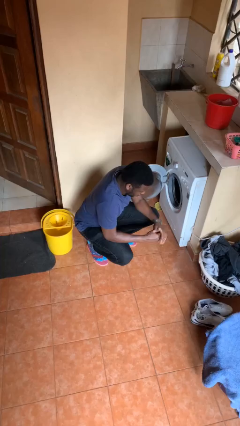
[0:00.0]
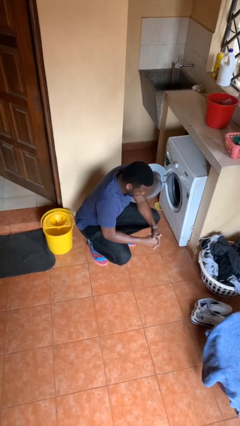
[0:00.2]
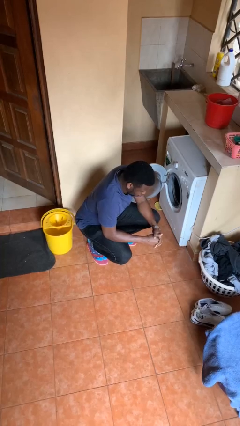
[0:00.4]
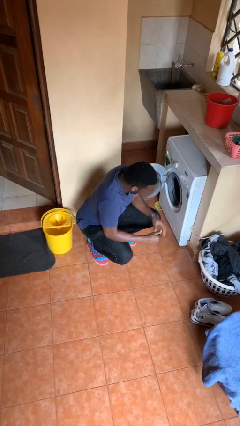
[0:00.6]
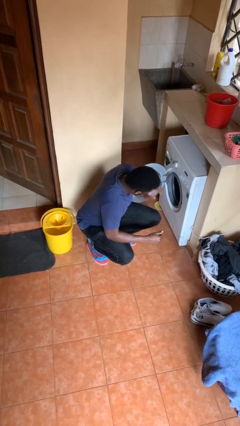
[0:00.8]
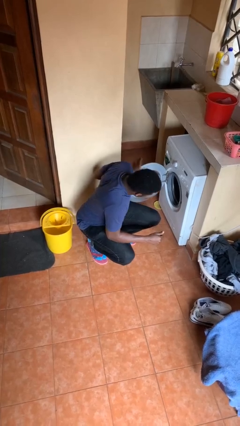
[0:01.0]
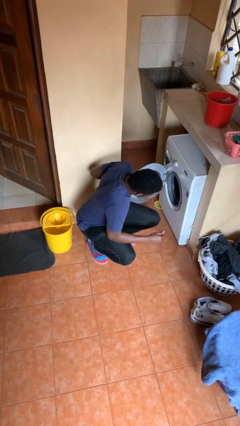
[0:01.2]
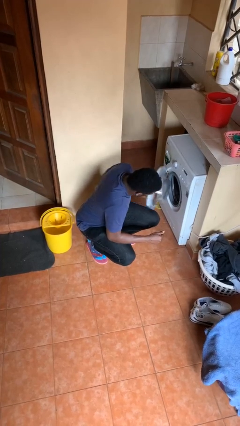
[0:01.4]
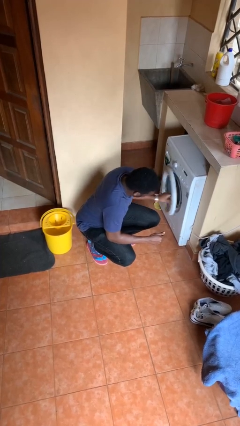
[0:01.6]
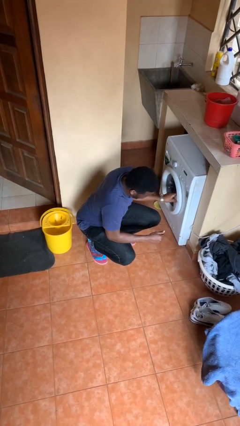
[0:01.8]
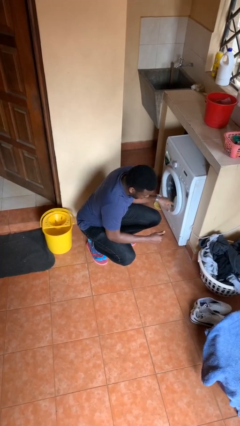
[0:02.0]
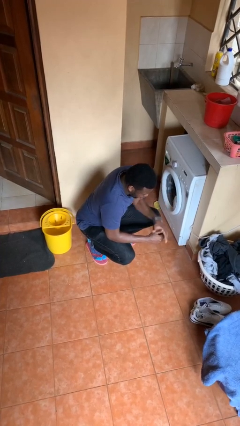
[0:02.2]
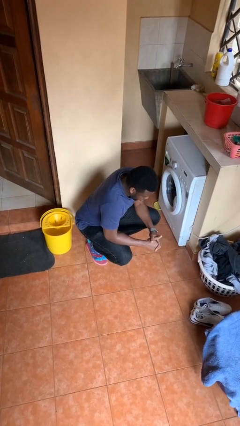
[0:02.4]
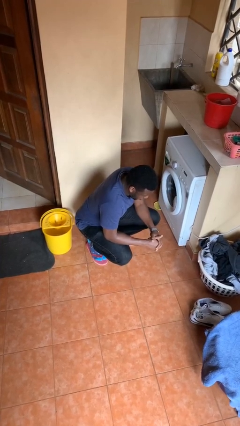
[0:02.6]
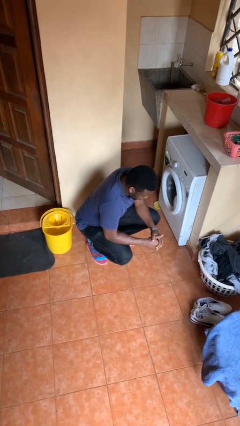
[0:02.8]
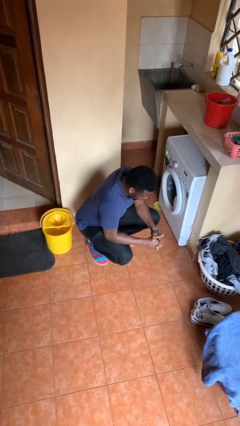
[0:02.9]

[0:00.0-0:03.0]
person closes clothes washer

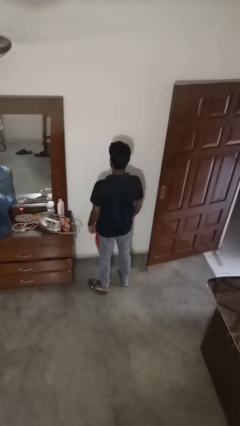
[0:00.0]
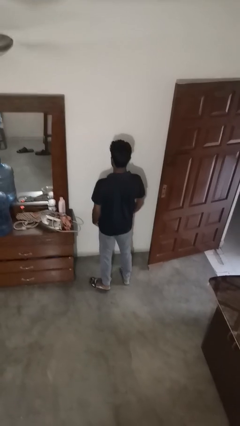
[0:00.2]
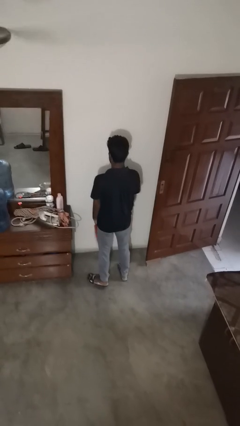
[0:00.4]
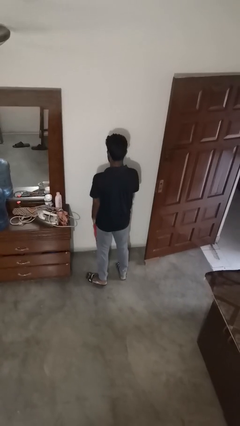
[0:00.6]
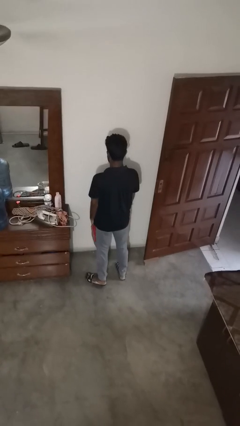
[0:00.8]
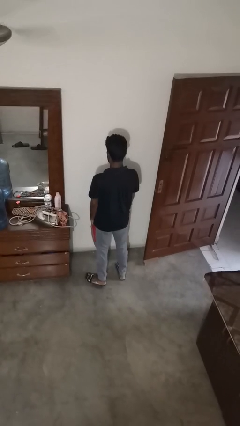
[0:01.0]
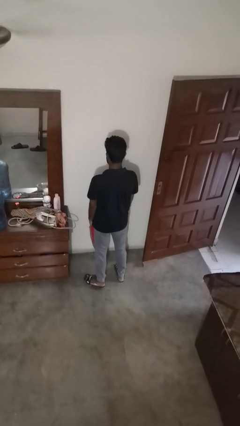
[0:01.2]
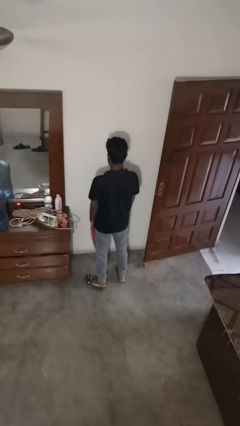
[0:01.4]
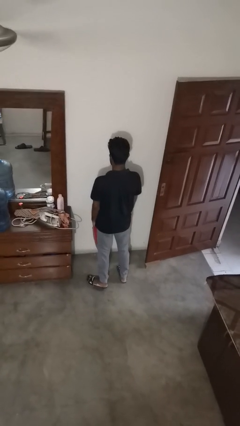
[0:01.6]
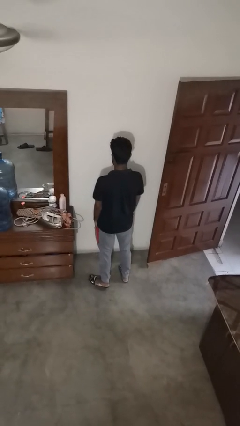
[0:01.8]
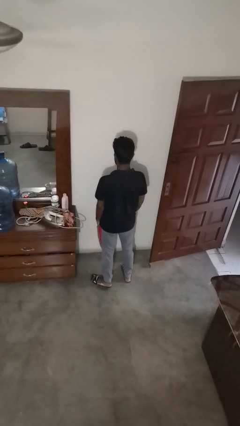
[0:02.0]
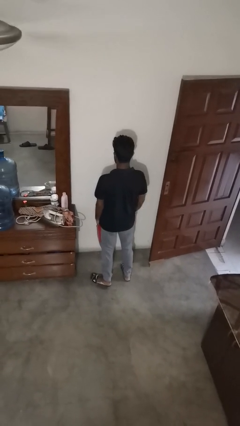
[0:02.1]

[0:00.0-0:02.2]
person puts hands in back pockets

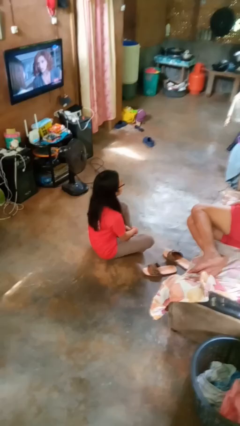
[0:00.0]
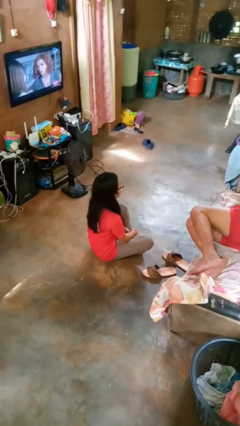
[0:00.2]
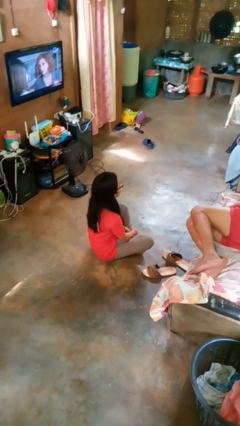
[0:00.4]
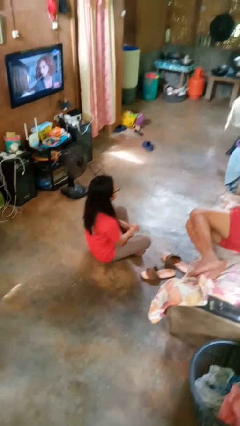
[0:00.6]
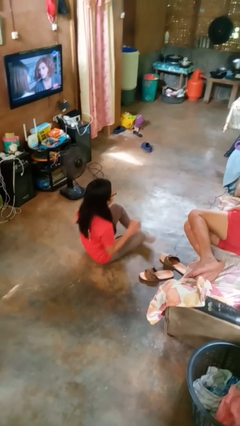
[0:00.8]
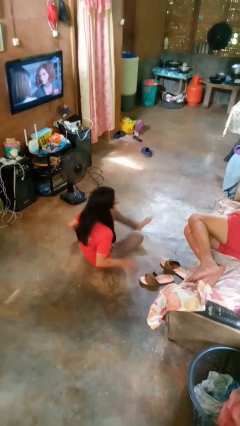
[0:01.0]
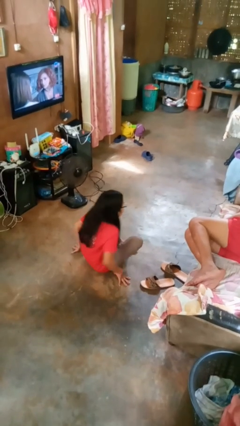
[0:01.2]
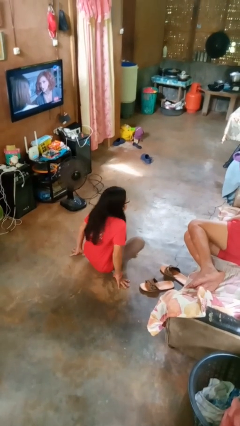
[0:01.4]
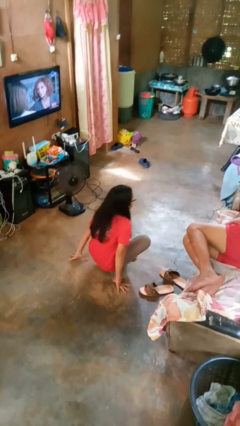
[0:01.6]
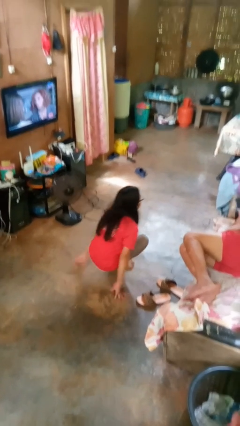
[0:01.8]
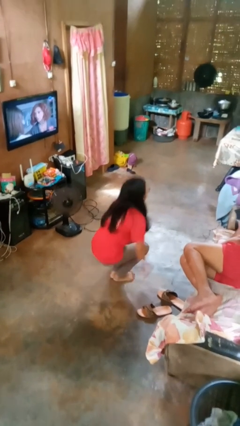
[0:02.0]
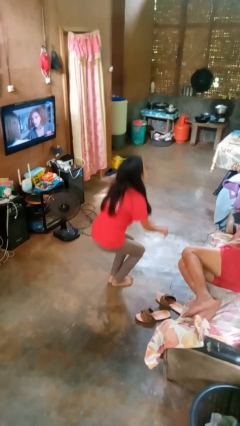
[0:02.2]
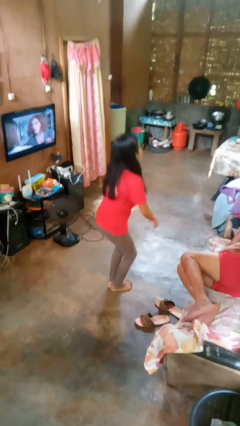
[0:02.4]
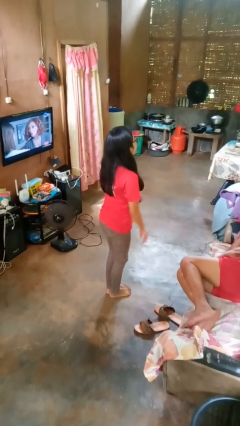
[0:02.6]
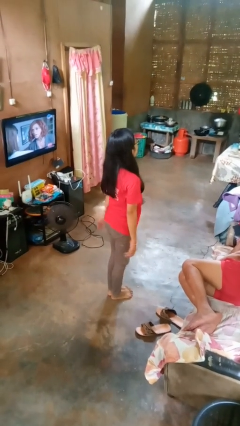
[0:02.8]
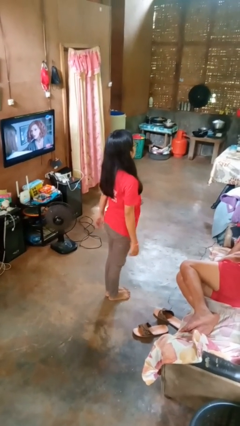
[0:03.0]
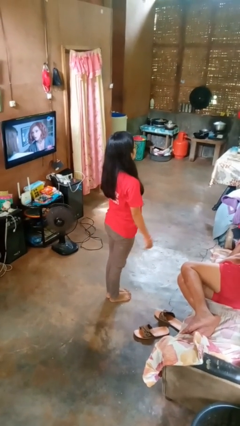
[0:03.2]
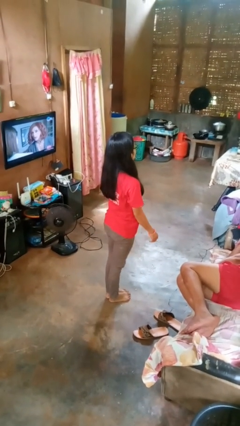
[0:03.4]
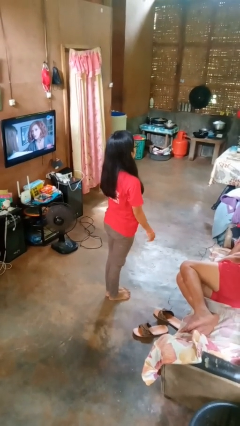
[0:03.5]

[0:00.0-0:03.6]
person stands up from floor

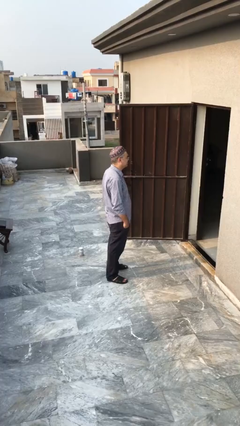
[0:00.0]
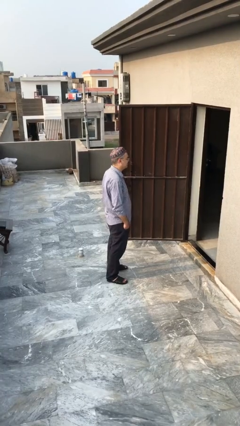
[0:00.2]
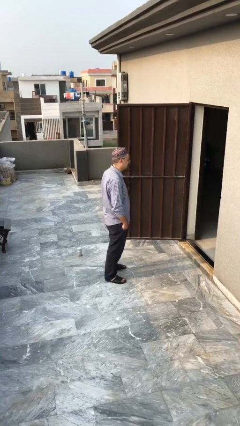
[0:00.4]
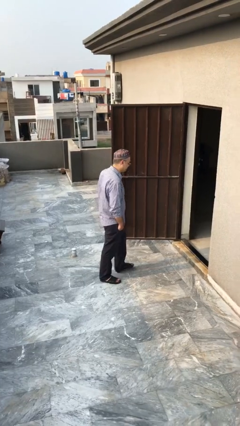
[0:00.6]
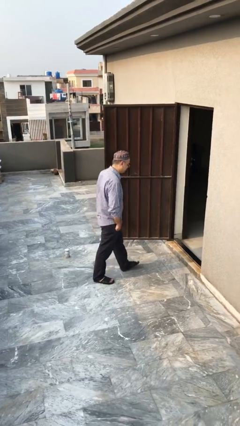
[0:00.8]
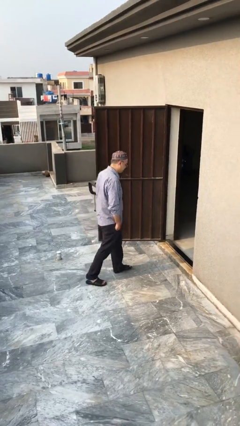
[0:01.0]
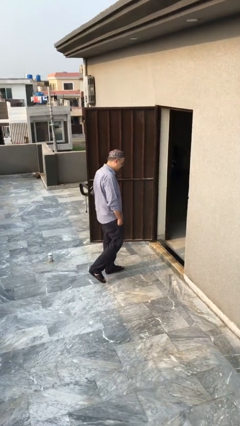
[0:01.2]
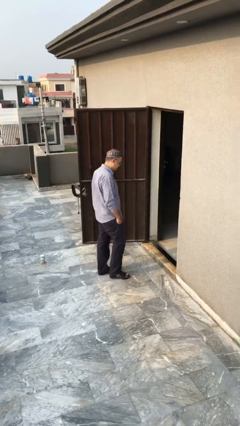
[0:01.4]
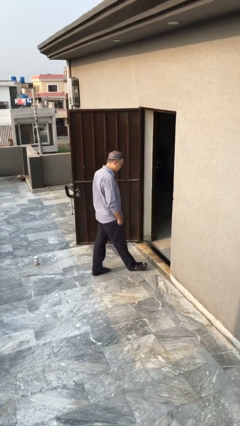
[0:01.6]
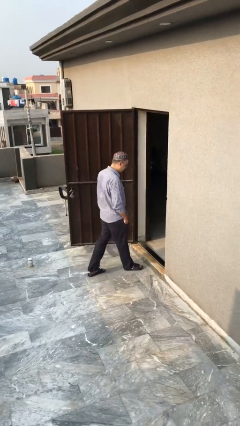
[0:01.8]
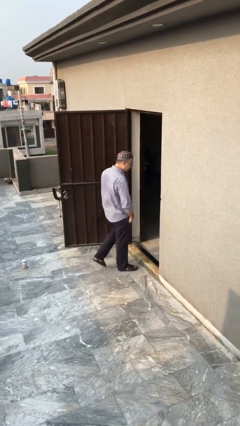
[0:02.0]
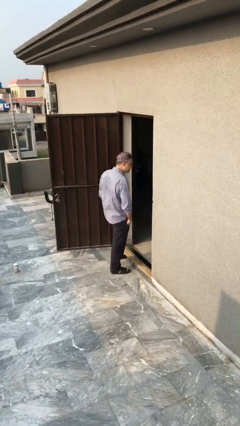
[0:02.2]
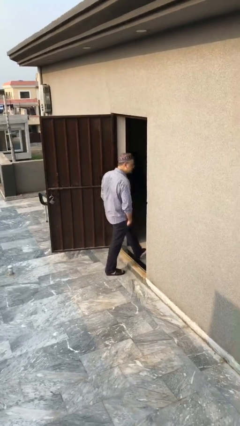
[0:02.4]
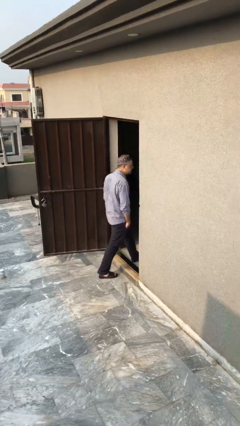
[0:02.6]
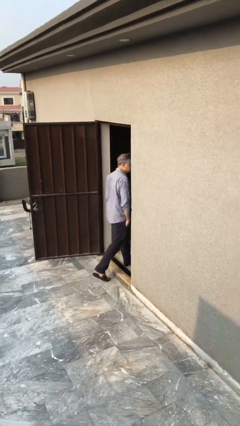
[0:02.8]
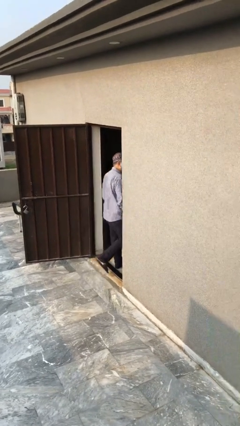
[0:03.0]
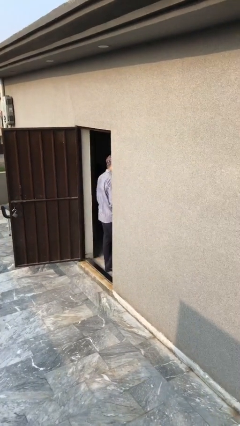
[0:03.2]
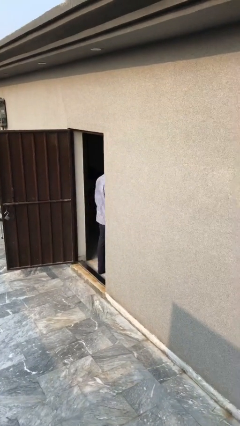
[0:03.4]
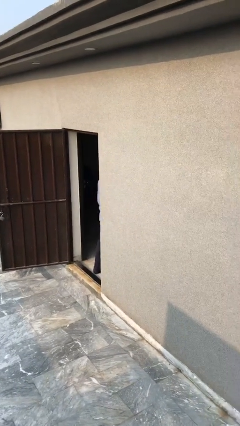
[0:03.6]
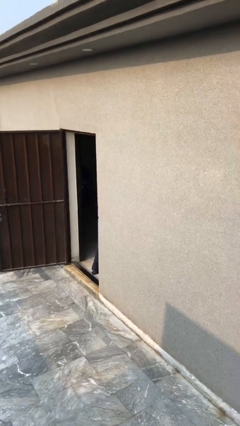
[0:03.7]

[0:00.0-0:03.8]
person exits scene through structure

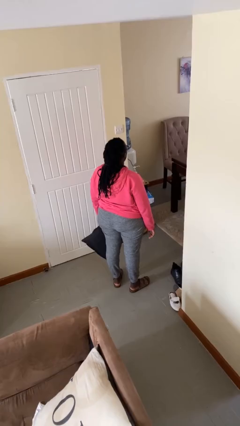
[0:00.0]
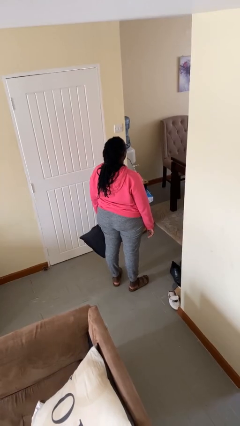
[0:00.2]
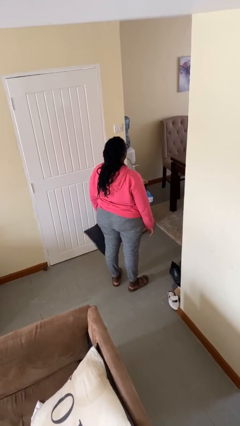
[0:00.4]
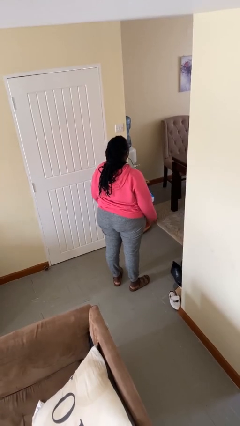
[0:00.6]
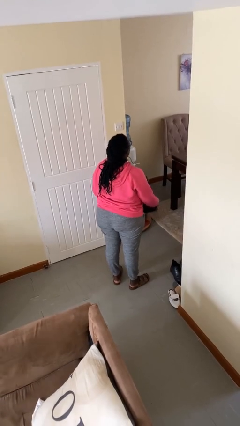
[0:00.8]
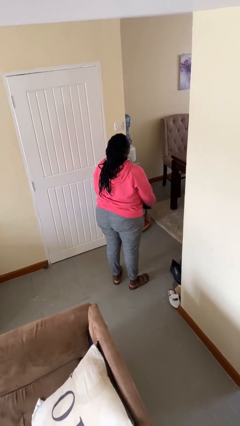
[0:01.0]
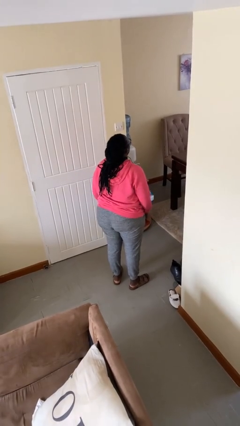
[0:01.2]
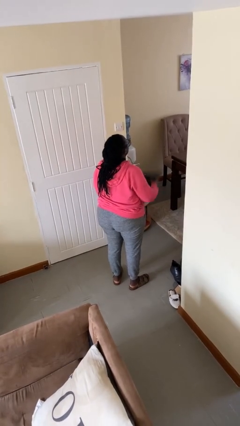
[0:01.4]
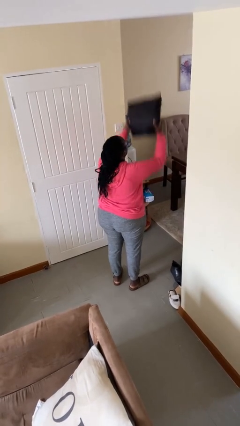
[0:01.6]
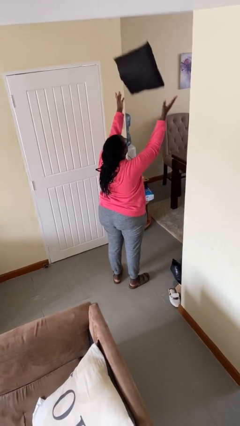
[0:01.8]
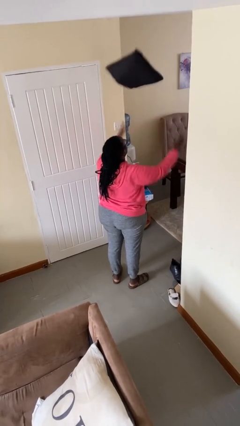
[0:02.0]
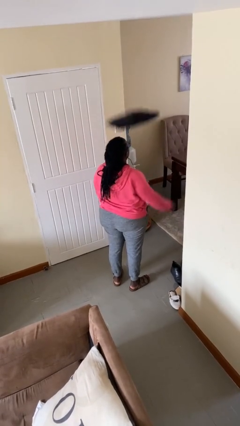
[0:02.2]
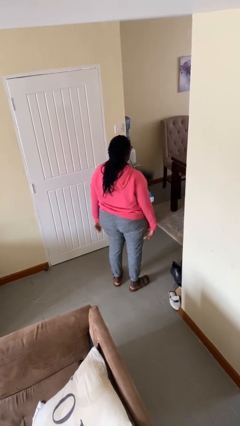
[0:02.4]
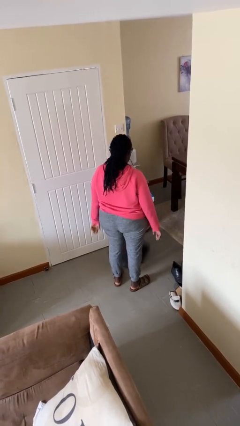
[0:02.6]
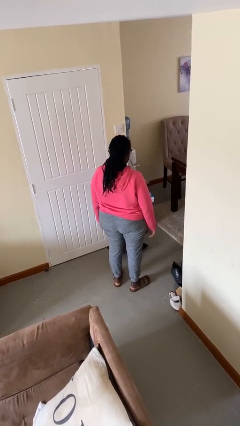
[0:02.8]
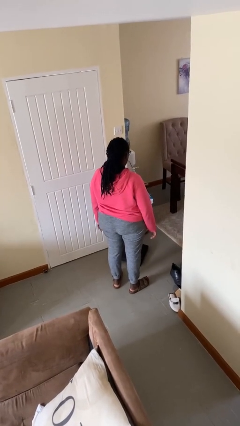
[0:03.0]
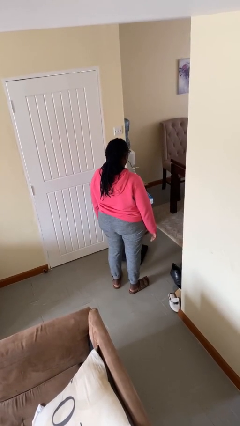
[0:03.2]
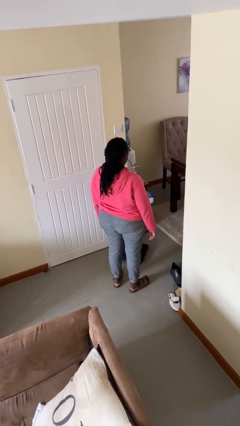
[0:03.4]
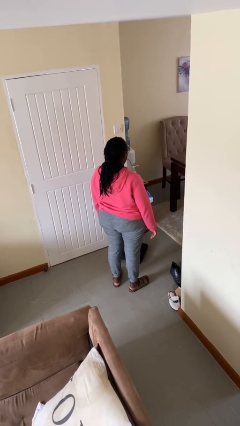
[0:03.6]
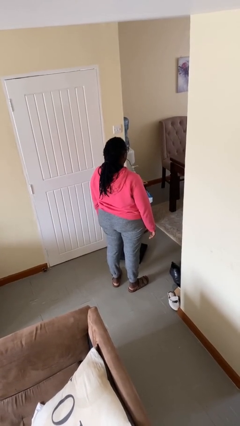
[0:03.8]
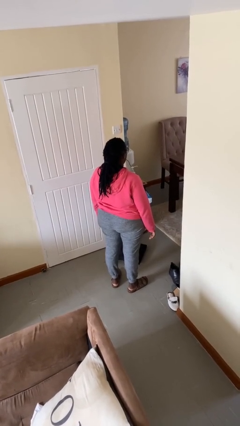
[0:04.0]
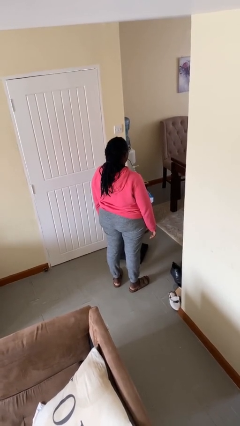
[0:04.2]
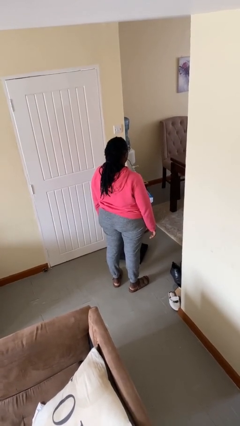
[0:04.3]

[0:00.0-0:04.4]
person throws object into air

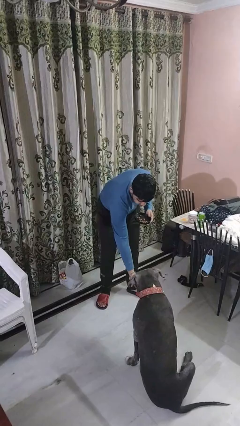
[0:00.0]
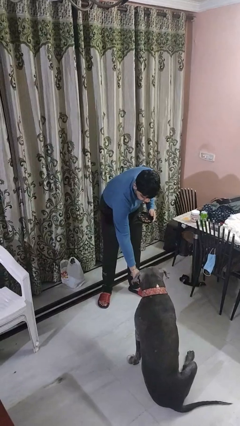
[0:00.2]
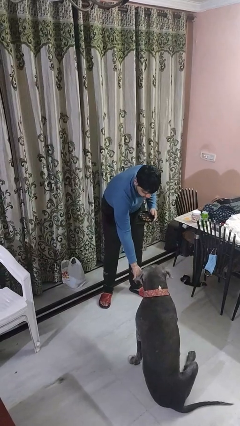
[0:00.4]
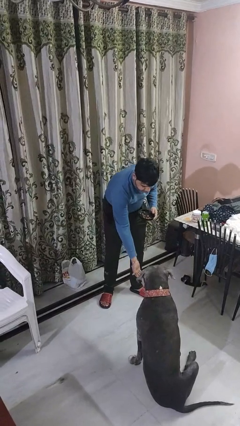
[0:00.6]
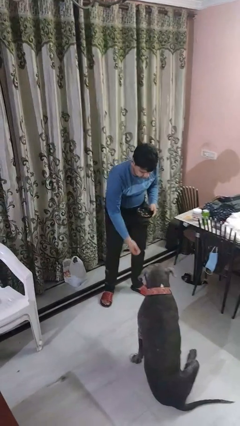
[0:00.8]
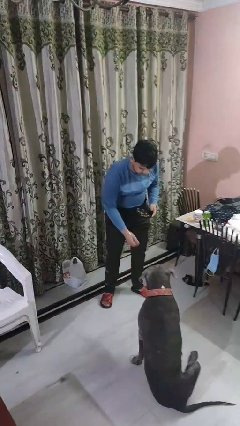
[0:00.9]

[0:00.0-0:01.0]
person feeds dog
